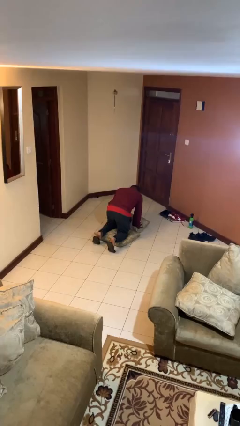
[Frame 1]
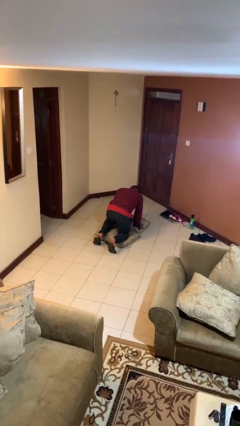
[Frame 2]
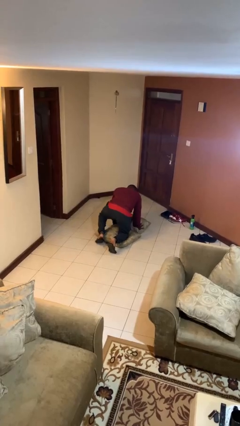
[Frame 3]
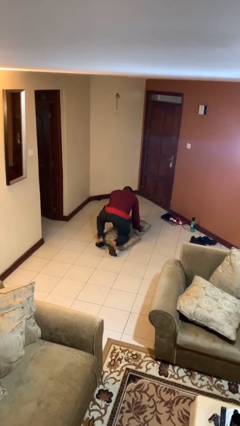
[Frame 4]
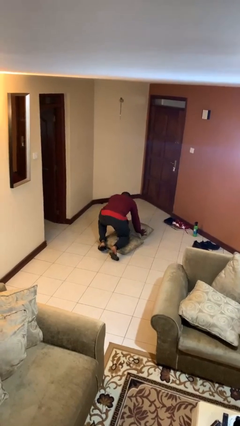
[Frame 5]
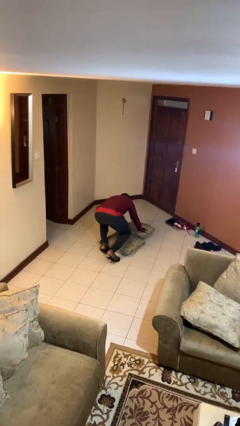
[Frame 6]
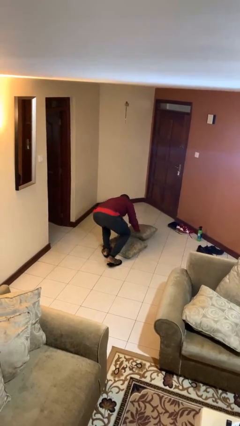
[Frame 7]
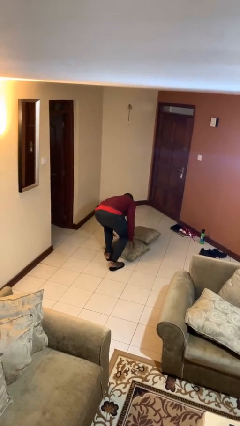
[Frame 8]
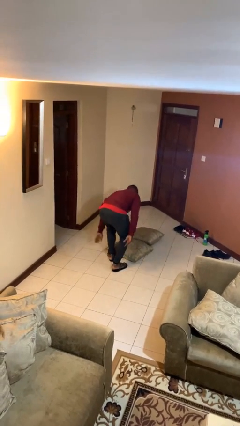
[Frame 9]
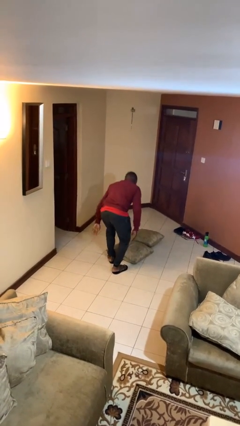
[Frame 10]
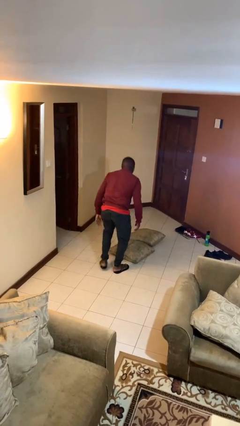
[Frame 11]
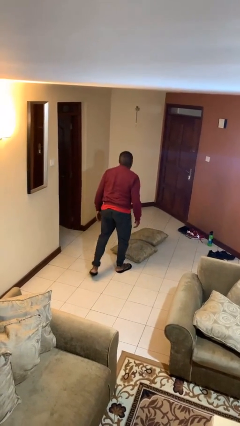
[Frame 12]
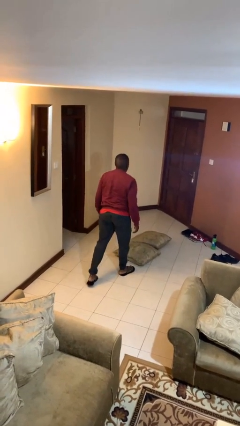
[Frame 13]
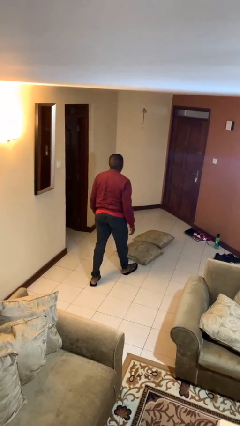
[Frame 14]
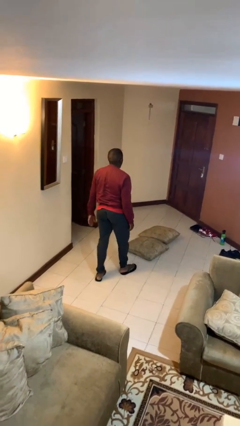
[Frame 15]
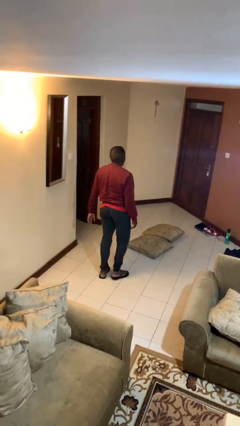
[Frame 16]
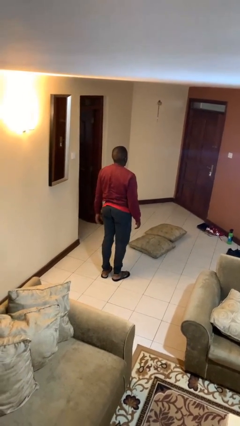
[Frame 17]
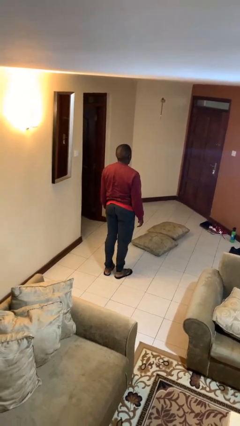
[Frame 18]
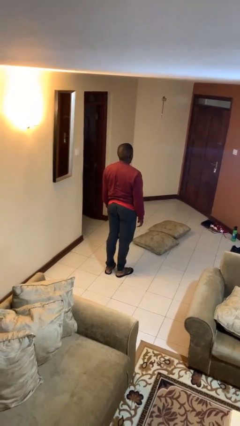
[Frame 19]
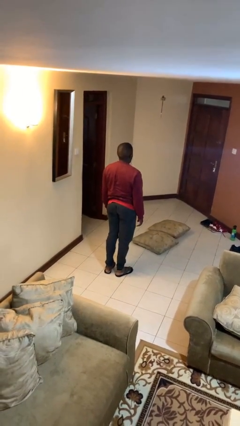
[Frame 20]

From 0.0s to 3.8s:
person stands up from floor

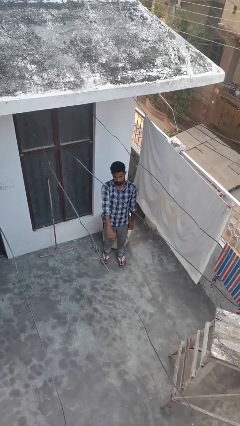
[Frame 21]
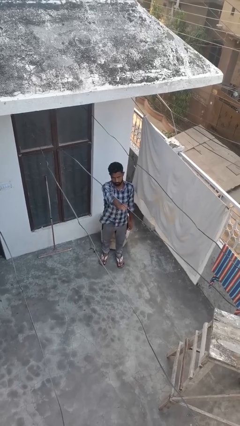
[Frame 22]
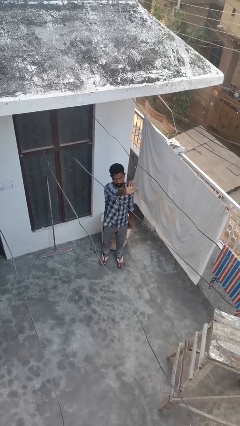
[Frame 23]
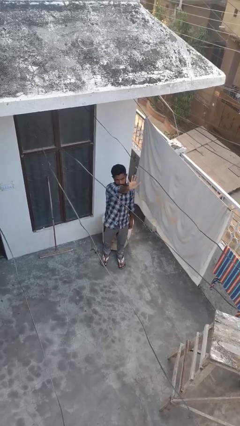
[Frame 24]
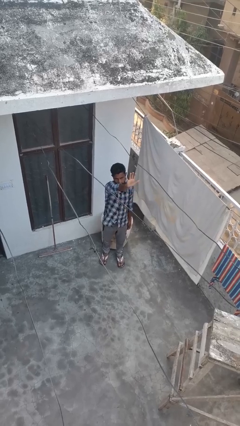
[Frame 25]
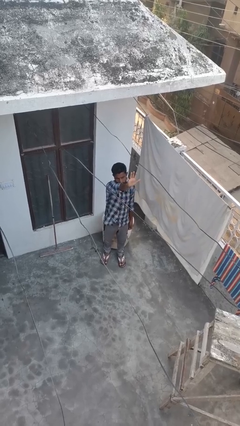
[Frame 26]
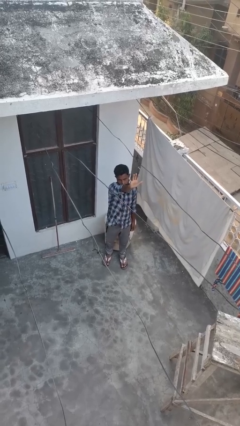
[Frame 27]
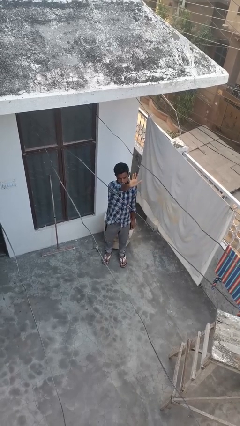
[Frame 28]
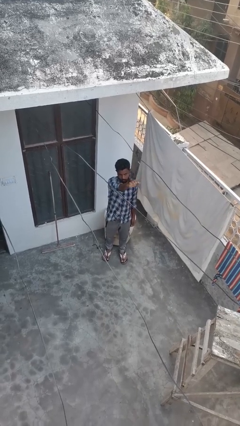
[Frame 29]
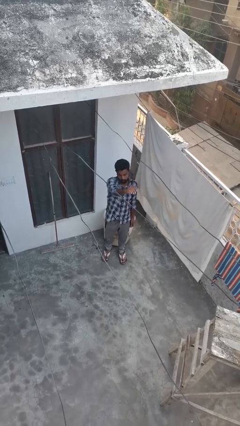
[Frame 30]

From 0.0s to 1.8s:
person gestures number five

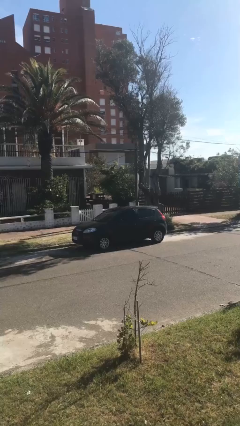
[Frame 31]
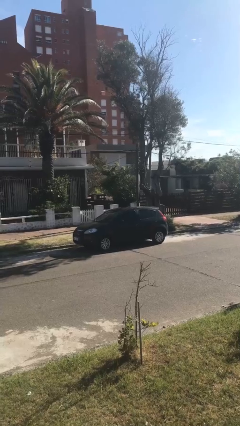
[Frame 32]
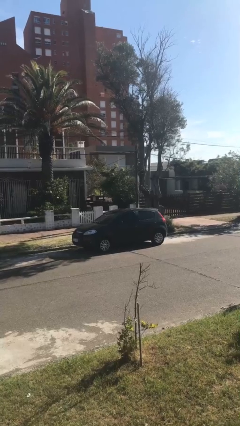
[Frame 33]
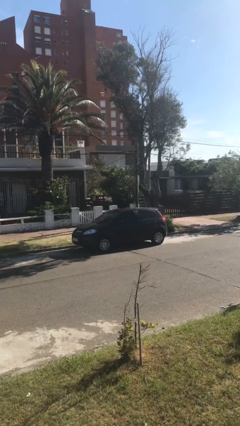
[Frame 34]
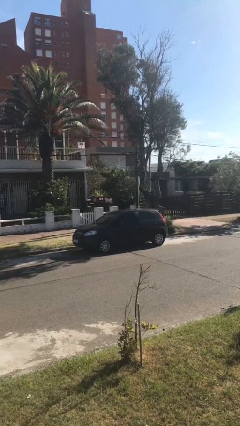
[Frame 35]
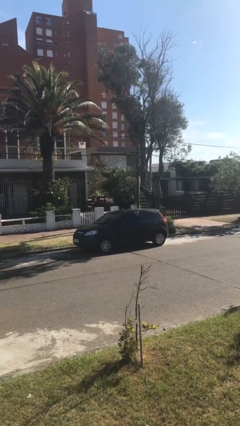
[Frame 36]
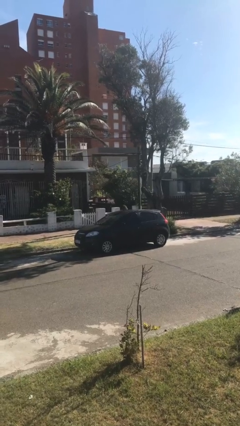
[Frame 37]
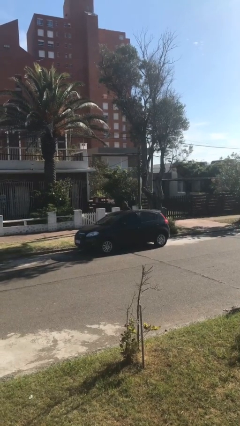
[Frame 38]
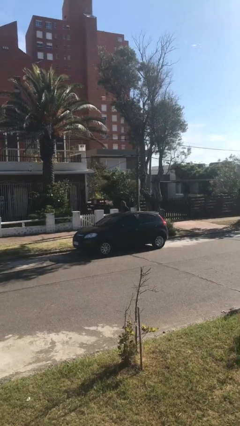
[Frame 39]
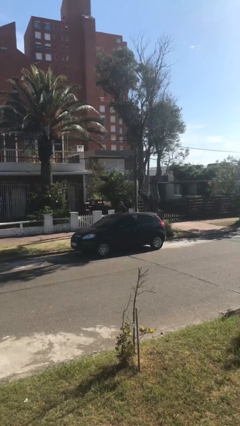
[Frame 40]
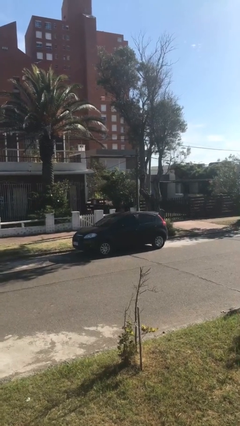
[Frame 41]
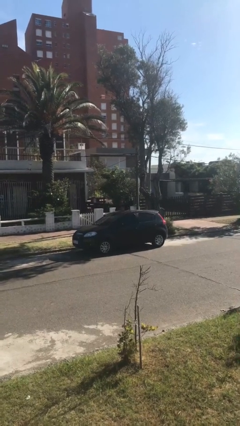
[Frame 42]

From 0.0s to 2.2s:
person exits car

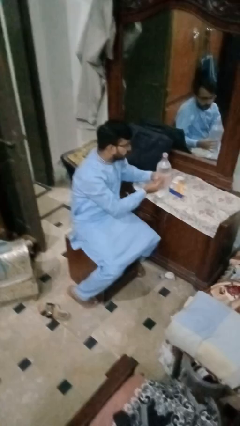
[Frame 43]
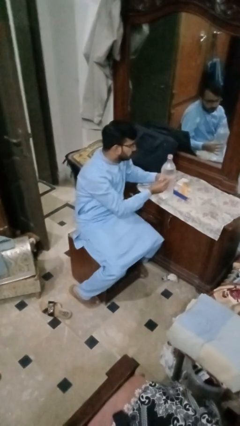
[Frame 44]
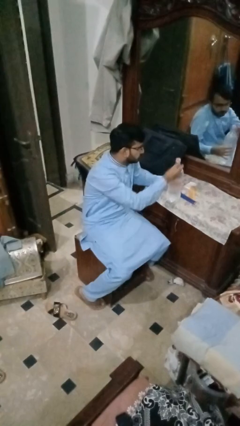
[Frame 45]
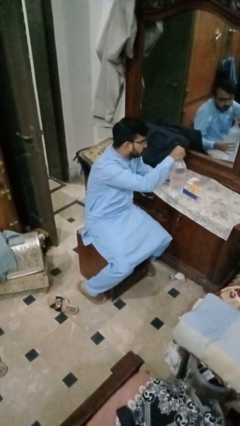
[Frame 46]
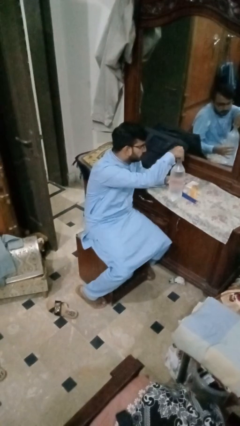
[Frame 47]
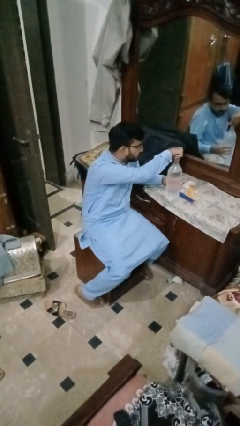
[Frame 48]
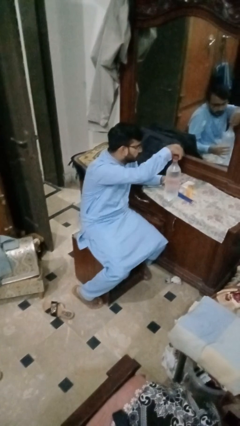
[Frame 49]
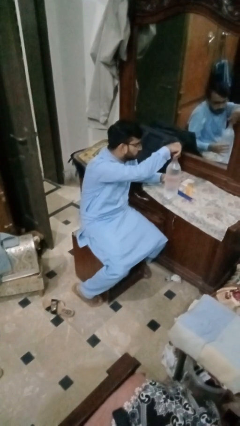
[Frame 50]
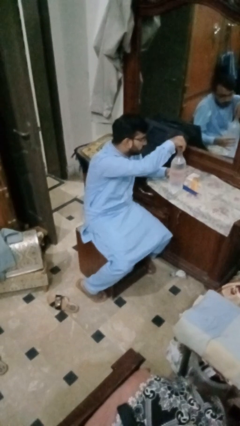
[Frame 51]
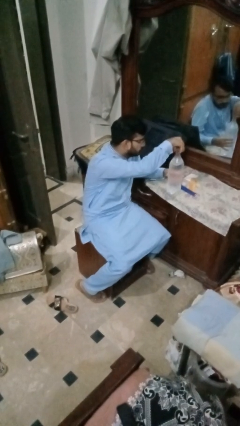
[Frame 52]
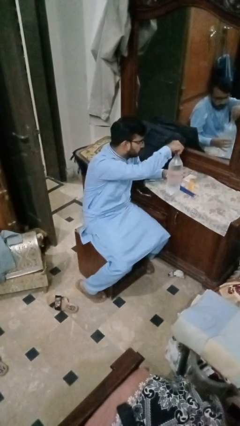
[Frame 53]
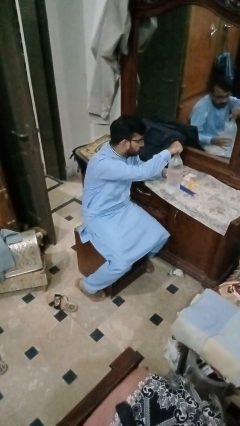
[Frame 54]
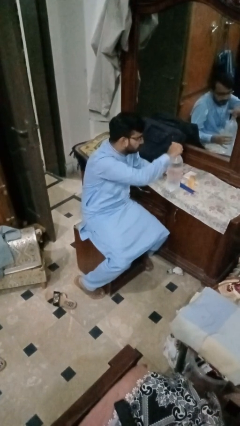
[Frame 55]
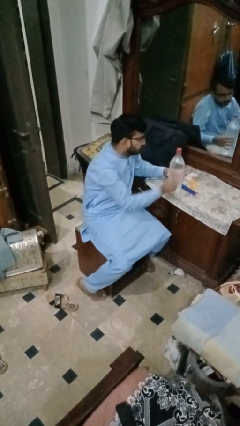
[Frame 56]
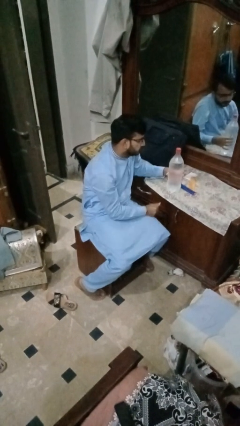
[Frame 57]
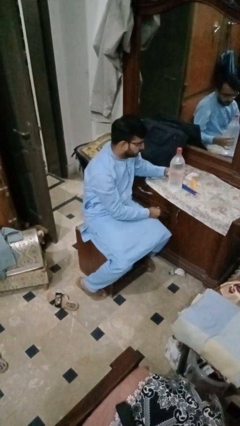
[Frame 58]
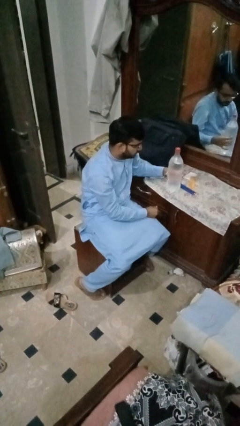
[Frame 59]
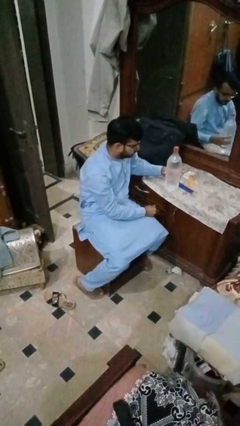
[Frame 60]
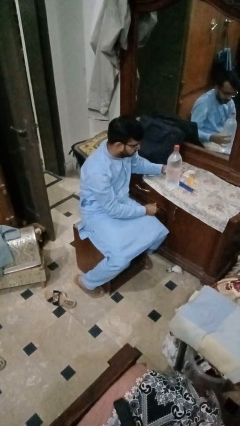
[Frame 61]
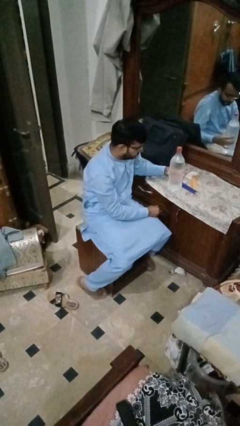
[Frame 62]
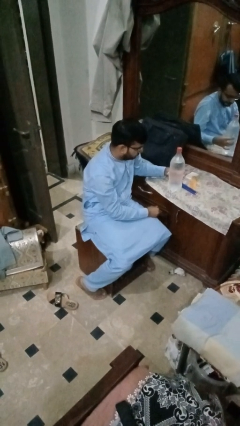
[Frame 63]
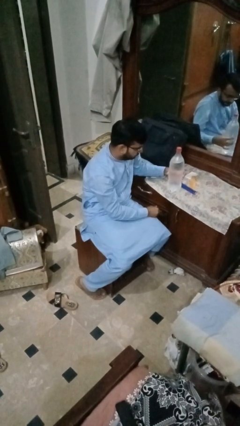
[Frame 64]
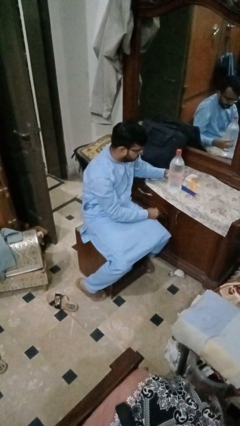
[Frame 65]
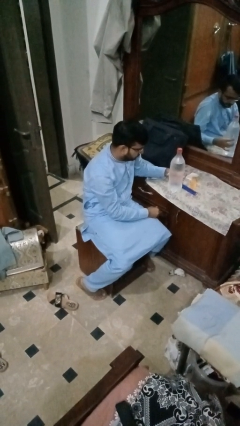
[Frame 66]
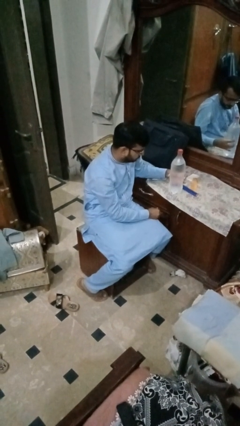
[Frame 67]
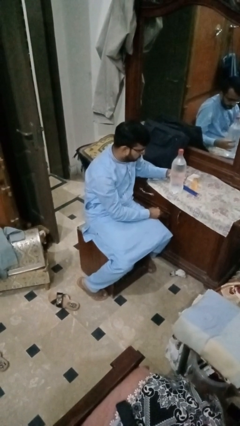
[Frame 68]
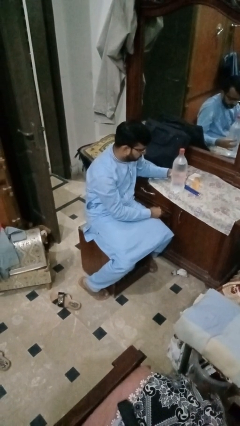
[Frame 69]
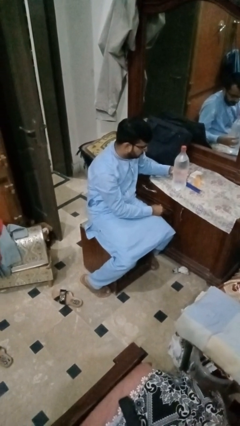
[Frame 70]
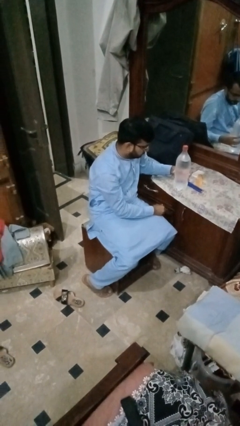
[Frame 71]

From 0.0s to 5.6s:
person screws lid to bottle

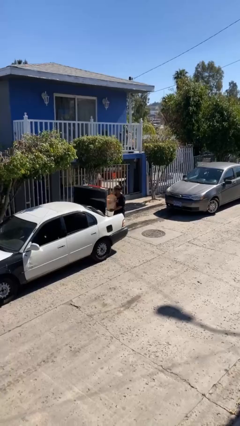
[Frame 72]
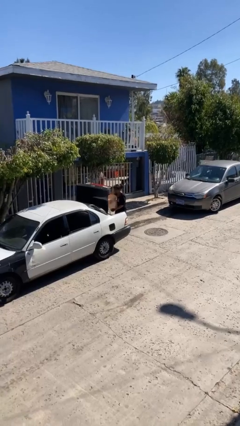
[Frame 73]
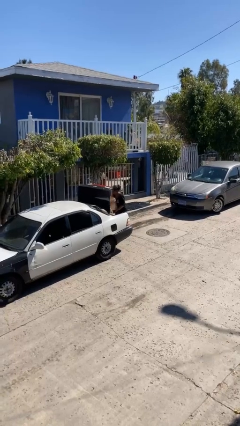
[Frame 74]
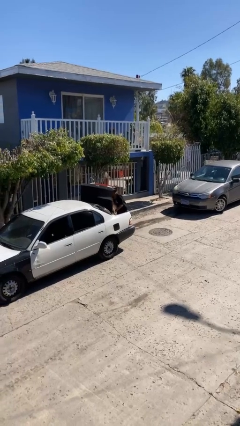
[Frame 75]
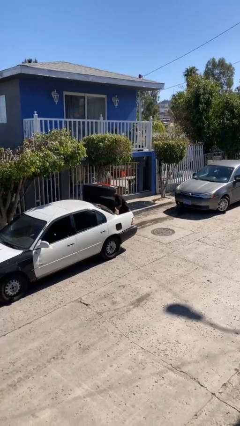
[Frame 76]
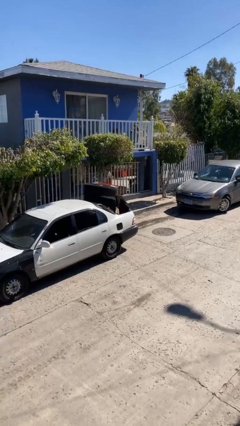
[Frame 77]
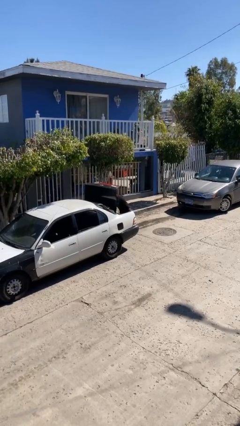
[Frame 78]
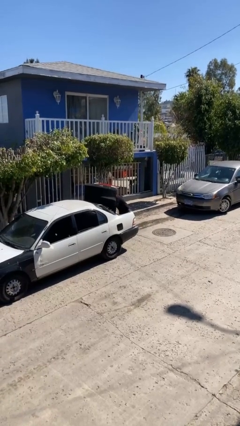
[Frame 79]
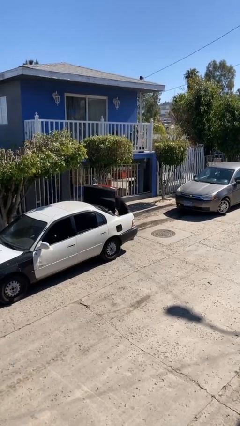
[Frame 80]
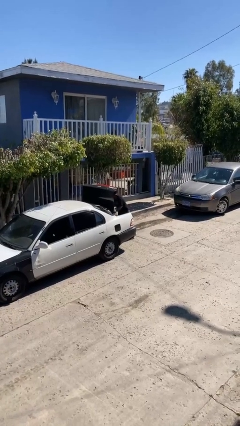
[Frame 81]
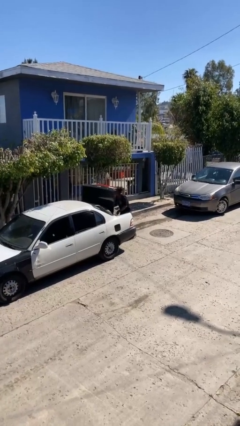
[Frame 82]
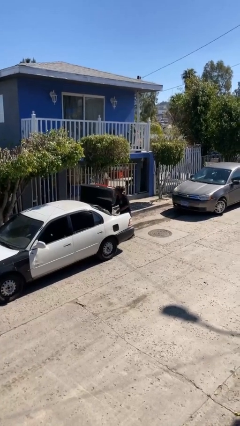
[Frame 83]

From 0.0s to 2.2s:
person loads car

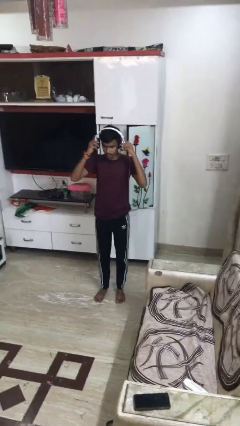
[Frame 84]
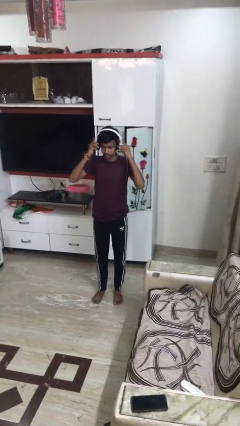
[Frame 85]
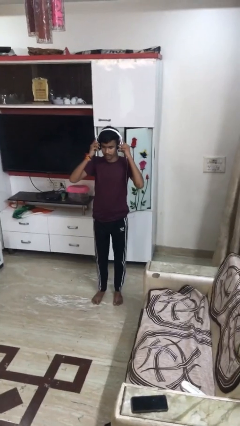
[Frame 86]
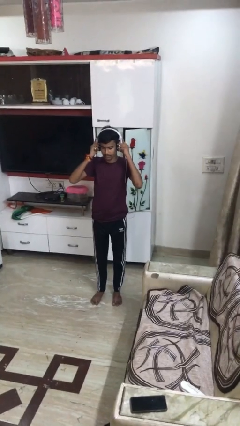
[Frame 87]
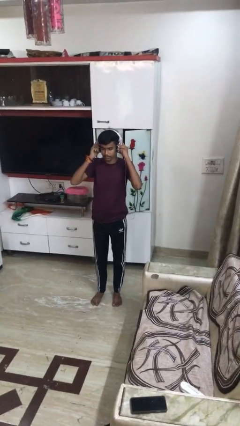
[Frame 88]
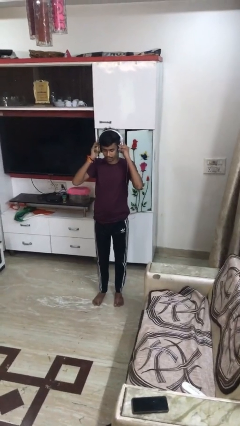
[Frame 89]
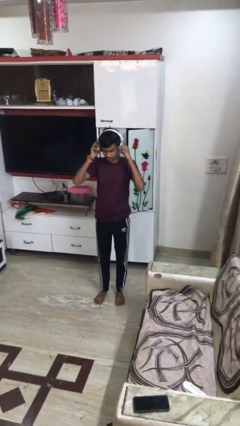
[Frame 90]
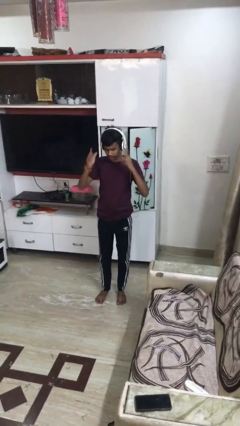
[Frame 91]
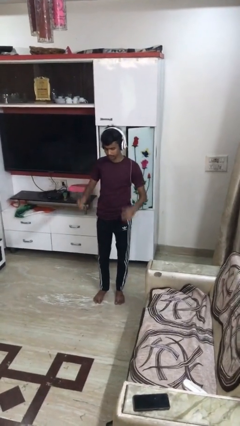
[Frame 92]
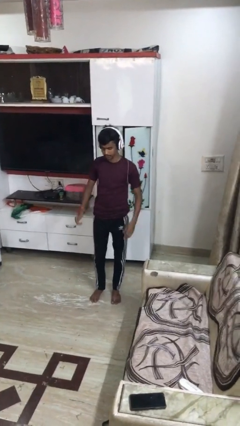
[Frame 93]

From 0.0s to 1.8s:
person puts on headphones
